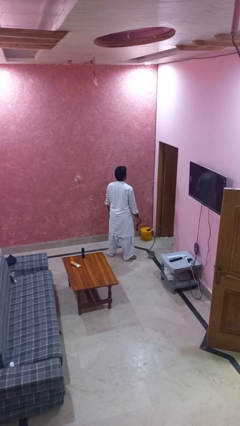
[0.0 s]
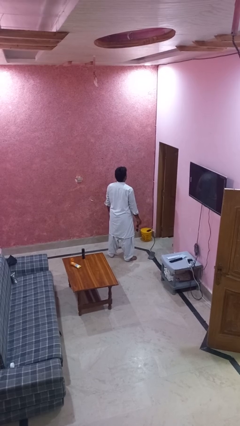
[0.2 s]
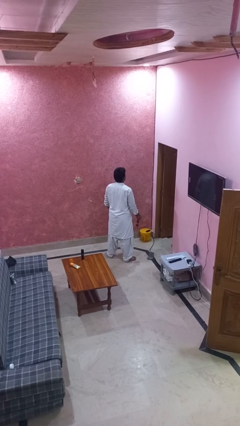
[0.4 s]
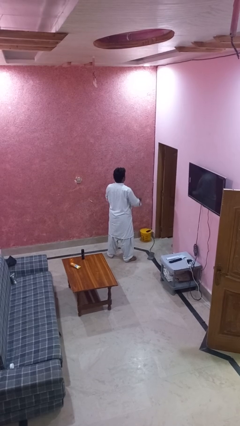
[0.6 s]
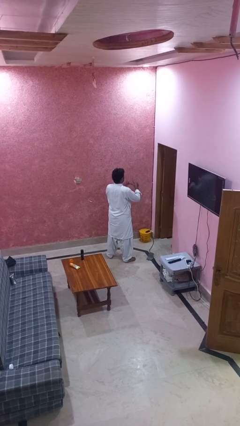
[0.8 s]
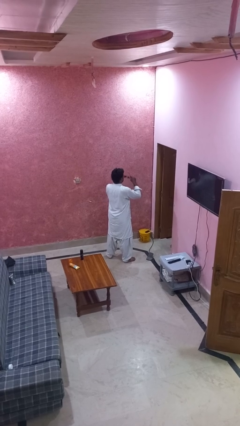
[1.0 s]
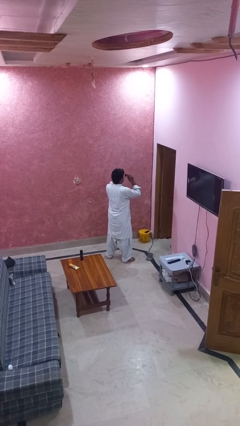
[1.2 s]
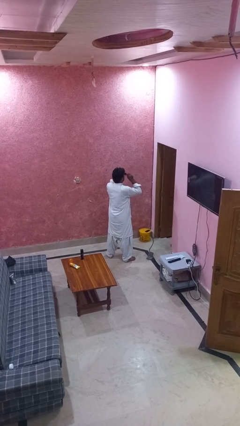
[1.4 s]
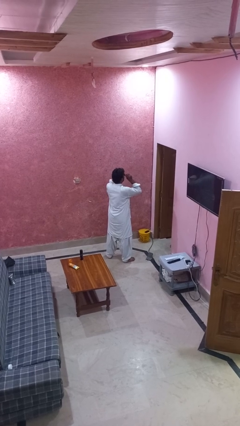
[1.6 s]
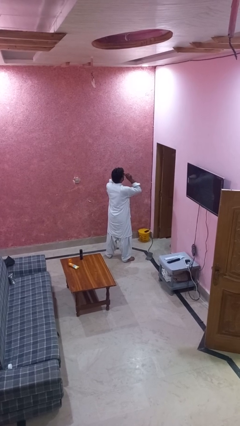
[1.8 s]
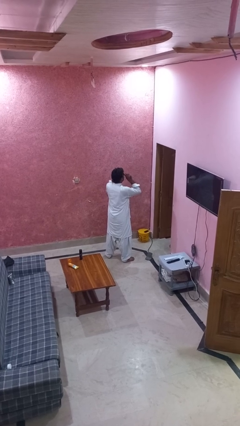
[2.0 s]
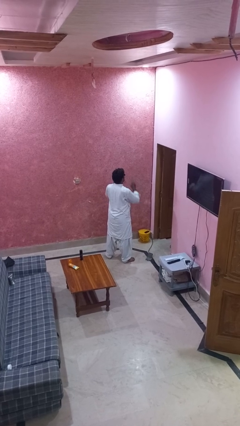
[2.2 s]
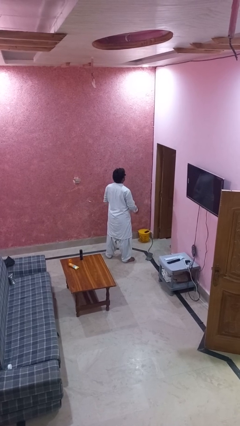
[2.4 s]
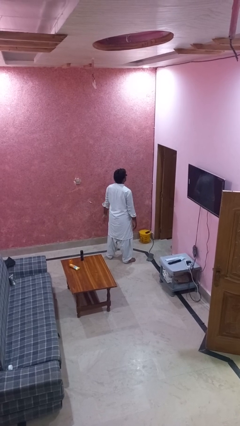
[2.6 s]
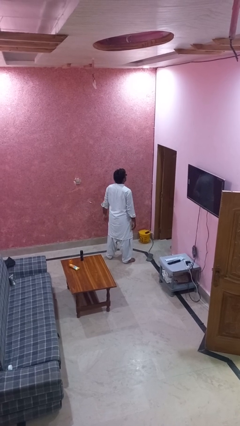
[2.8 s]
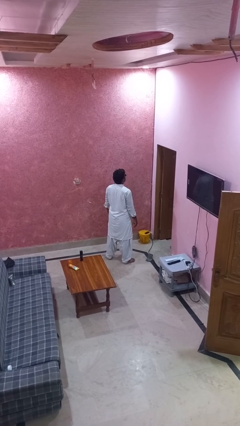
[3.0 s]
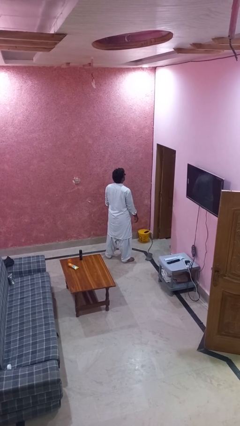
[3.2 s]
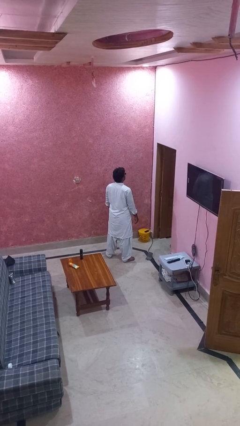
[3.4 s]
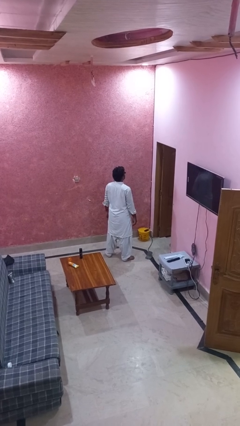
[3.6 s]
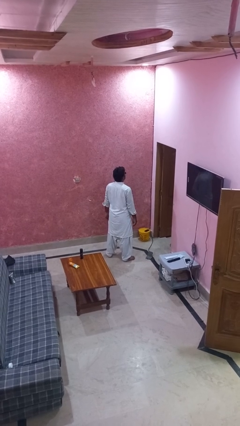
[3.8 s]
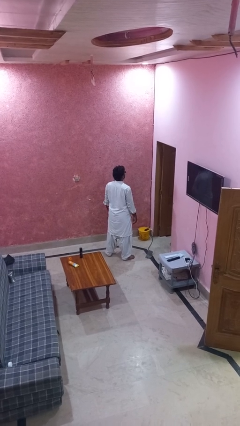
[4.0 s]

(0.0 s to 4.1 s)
person puts on sunglasses

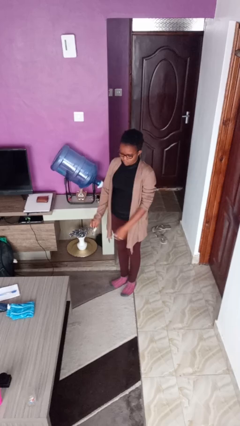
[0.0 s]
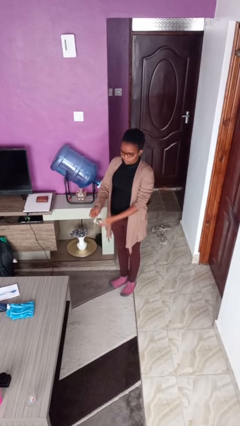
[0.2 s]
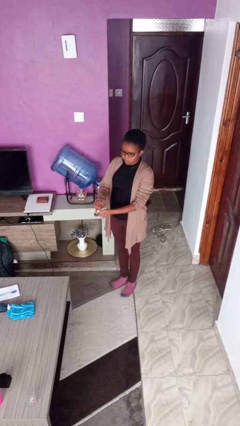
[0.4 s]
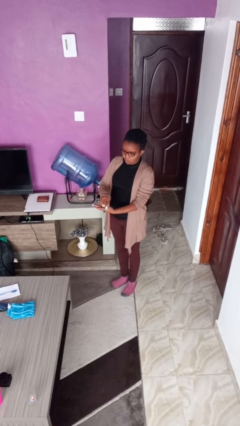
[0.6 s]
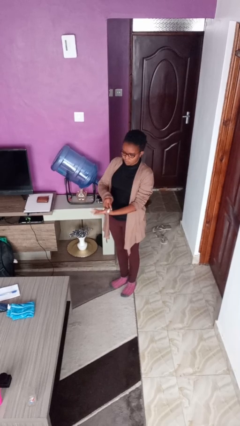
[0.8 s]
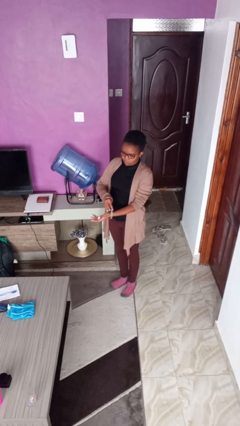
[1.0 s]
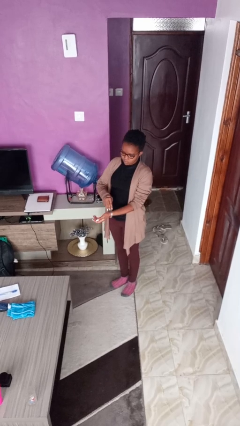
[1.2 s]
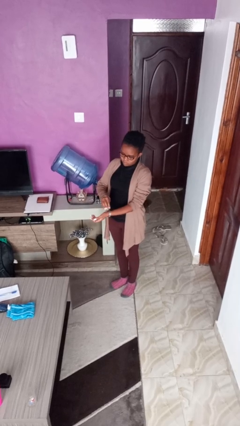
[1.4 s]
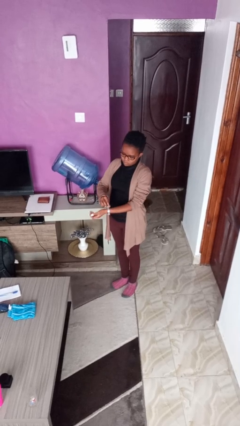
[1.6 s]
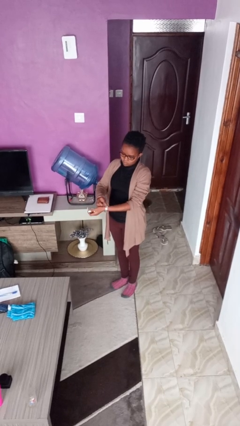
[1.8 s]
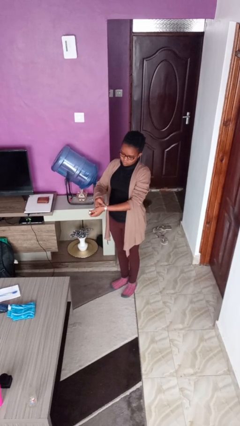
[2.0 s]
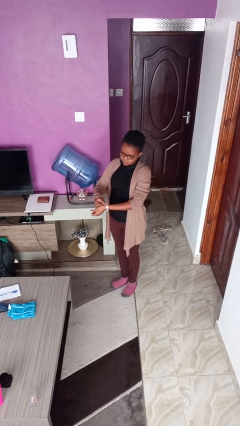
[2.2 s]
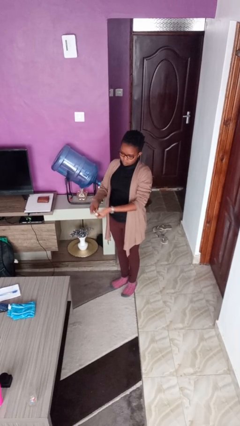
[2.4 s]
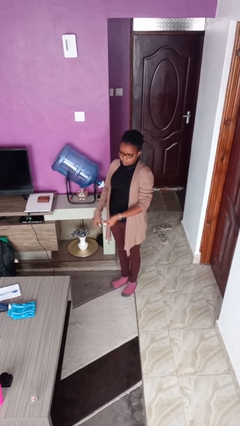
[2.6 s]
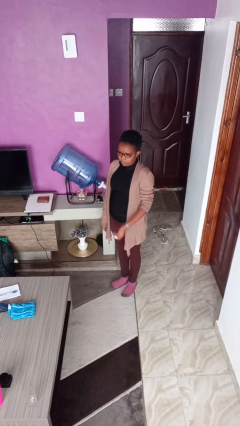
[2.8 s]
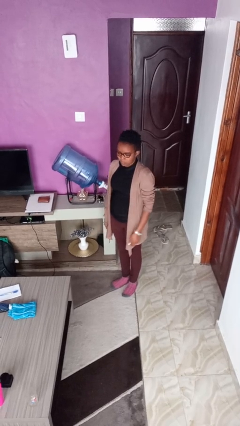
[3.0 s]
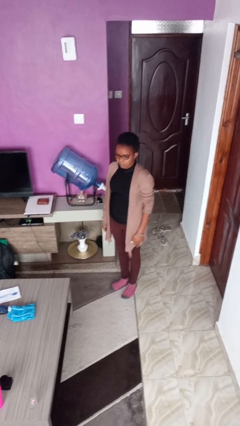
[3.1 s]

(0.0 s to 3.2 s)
person puts on wristwatch

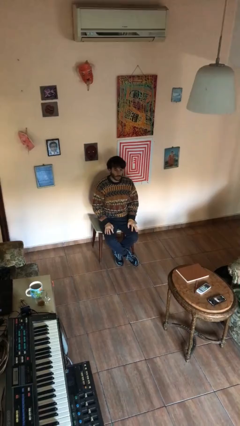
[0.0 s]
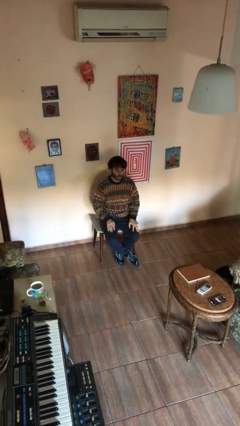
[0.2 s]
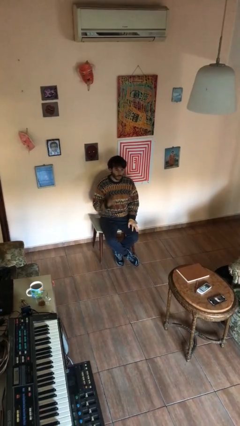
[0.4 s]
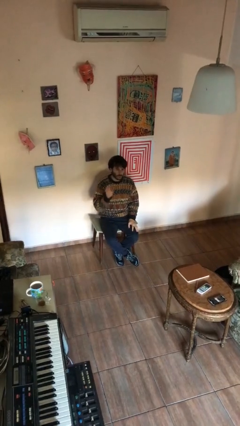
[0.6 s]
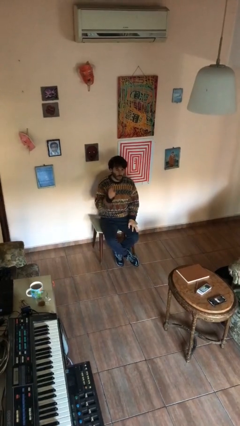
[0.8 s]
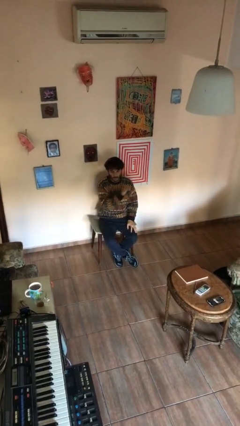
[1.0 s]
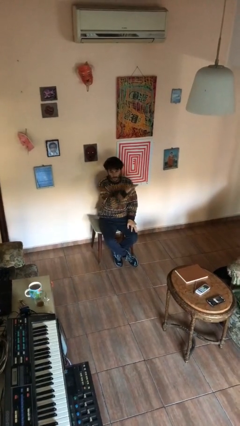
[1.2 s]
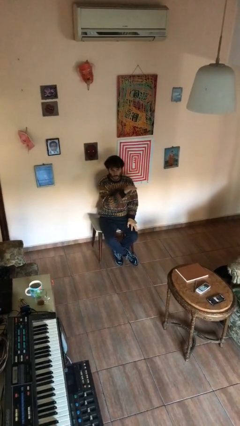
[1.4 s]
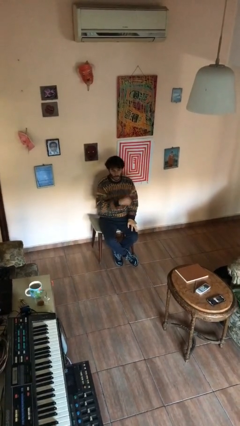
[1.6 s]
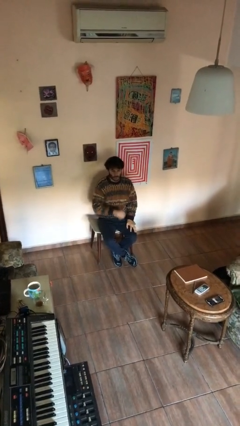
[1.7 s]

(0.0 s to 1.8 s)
person gestures swipe left

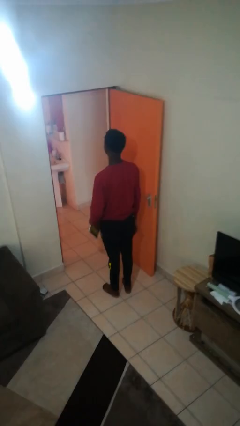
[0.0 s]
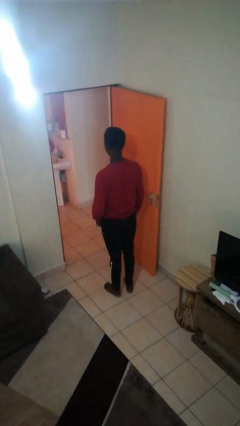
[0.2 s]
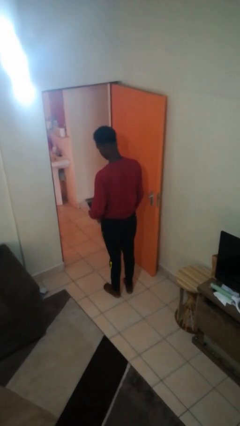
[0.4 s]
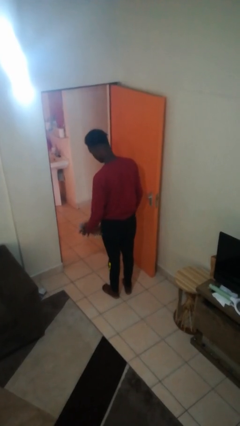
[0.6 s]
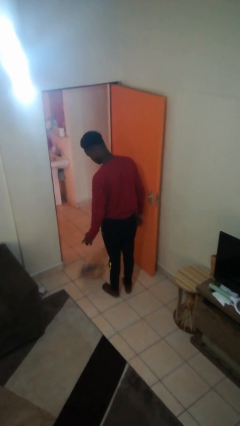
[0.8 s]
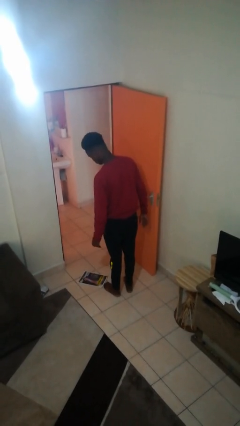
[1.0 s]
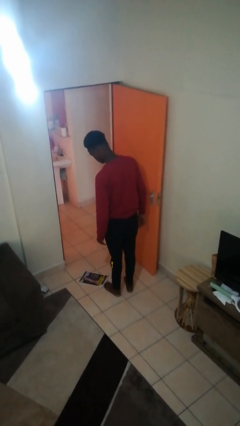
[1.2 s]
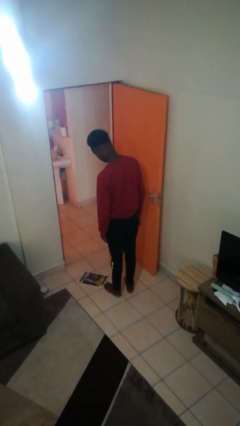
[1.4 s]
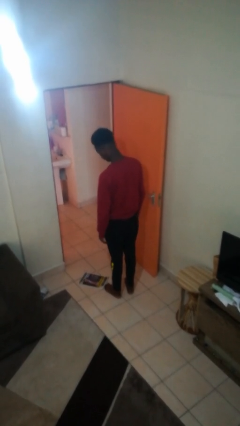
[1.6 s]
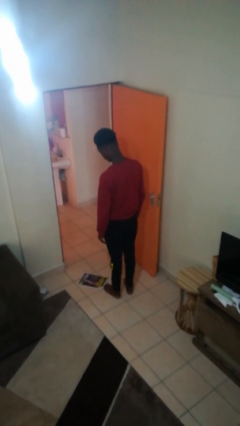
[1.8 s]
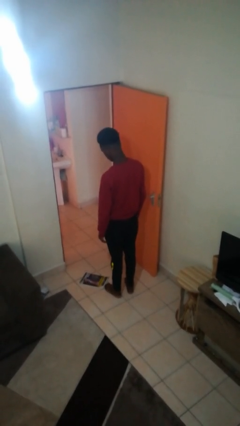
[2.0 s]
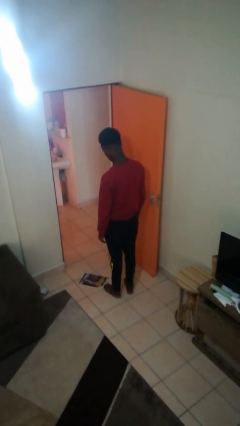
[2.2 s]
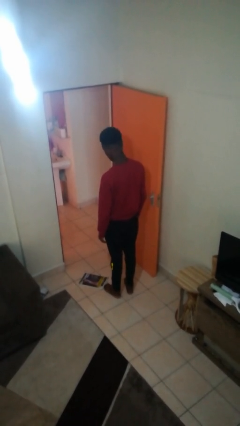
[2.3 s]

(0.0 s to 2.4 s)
person drops object

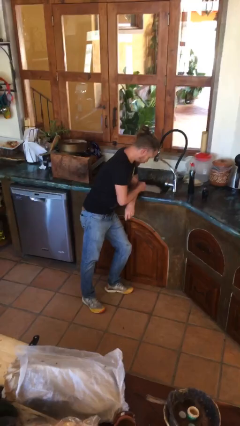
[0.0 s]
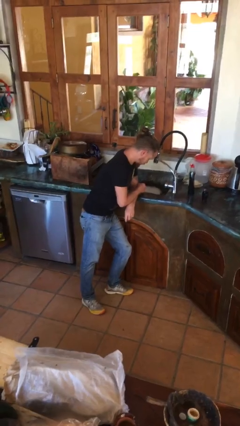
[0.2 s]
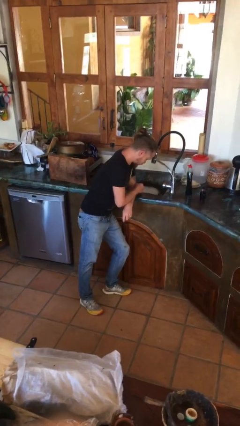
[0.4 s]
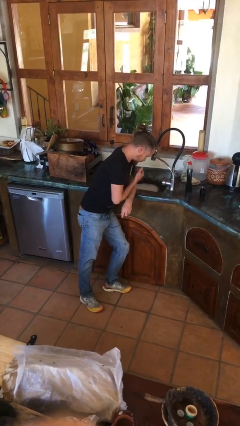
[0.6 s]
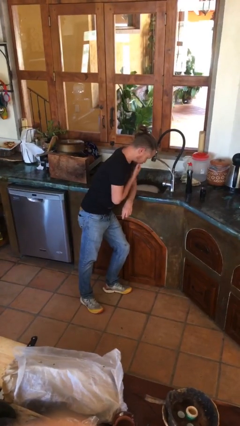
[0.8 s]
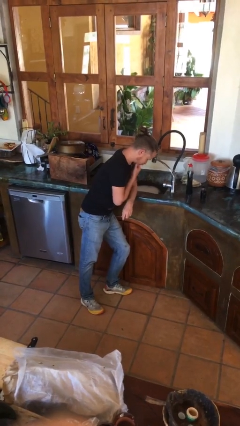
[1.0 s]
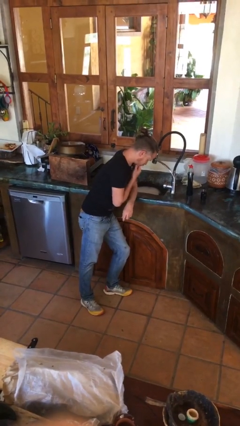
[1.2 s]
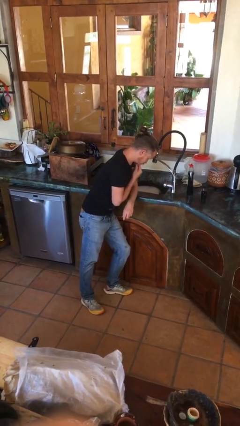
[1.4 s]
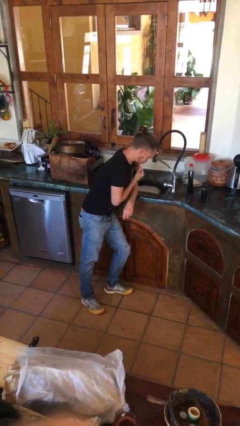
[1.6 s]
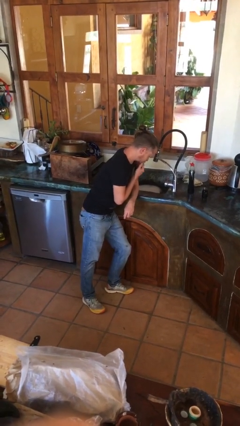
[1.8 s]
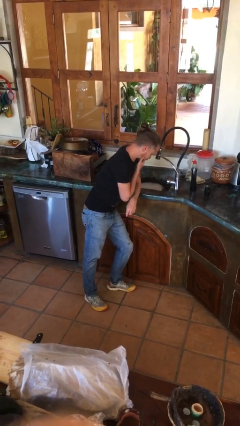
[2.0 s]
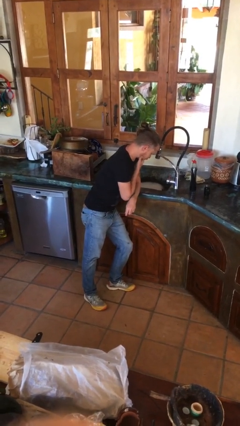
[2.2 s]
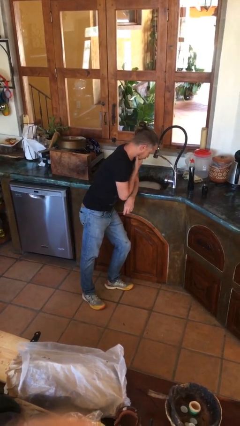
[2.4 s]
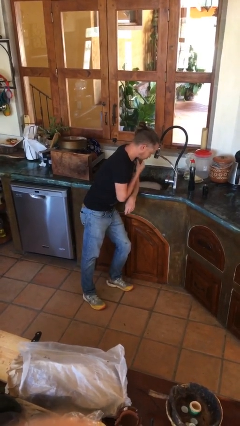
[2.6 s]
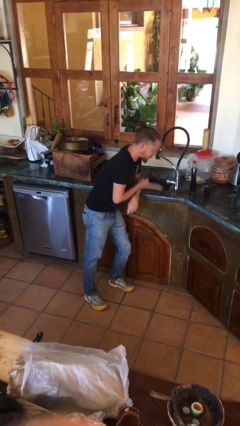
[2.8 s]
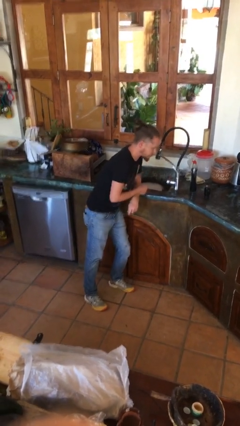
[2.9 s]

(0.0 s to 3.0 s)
person strokes chin

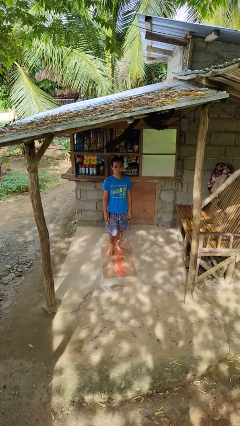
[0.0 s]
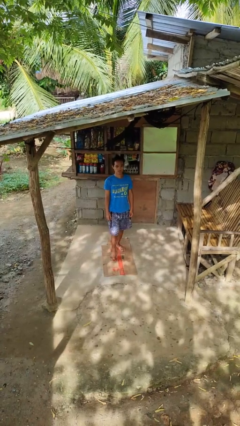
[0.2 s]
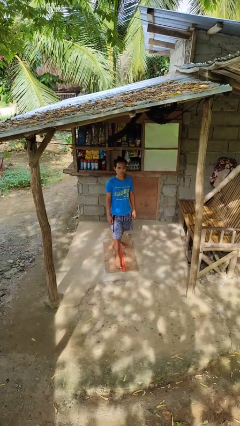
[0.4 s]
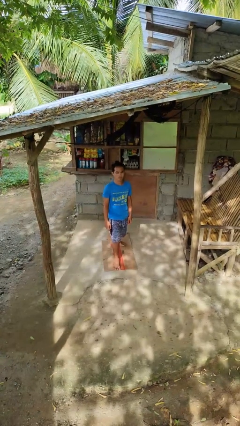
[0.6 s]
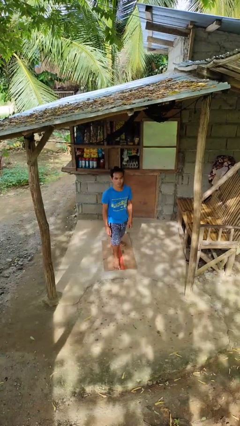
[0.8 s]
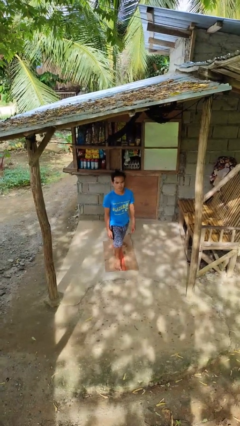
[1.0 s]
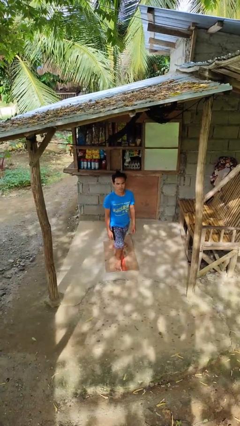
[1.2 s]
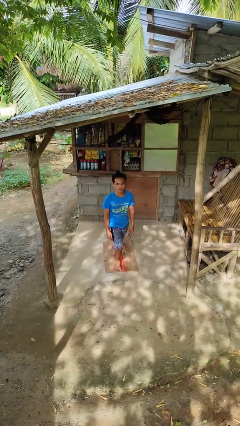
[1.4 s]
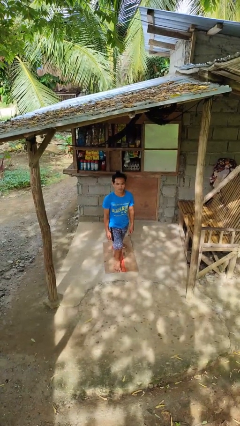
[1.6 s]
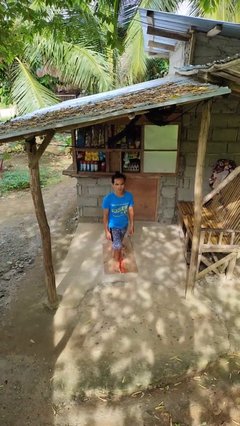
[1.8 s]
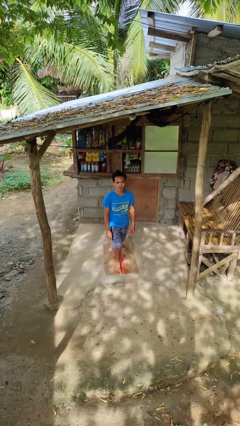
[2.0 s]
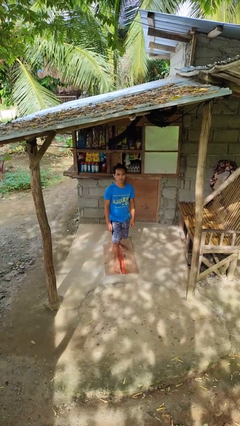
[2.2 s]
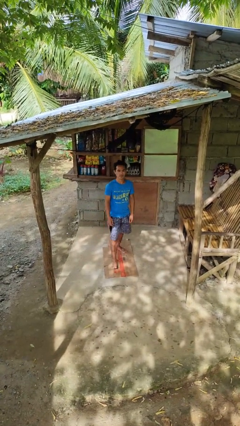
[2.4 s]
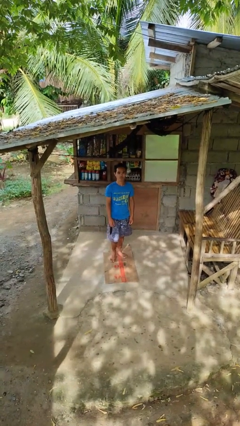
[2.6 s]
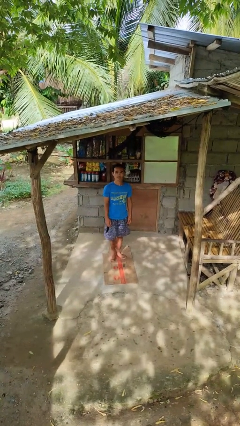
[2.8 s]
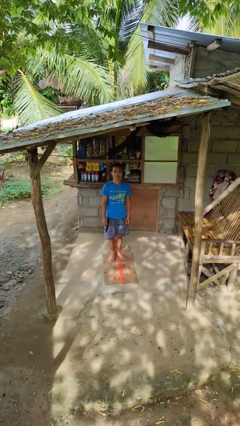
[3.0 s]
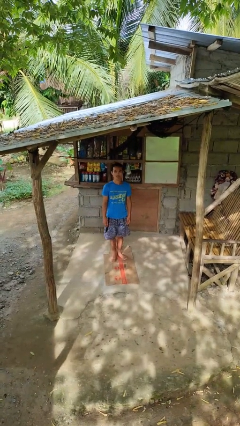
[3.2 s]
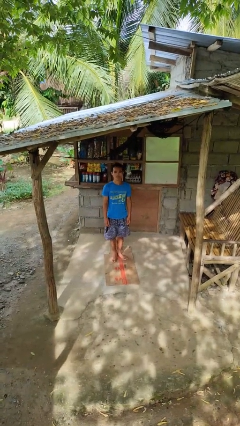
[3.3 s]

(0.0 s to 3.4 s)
person exercises with lunges
